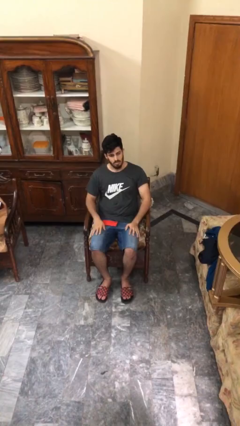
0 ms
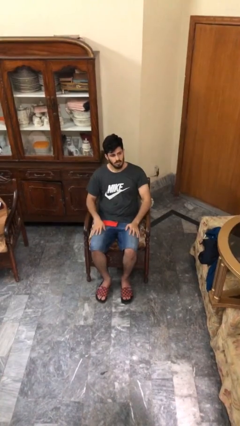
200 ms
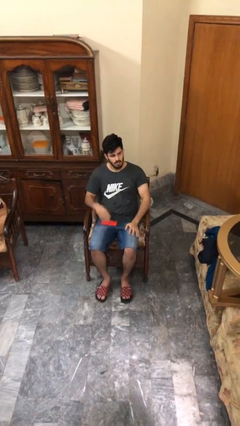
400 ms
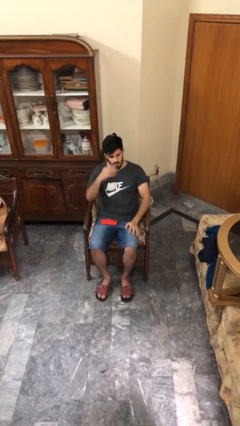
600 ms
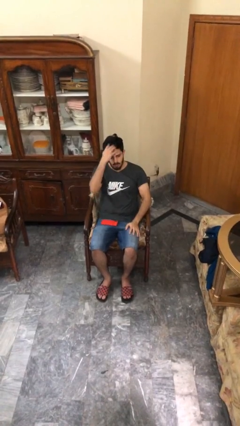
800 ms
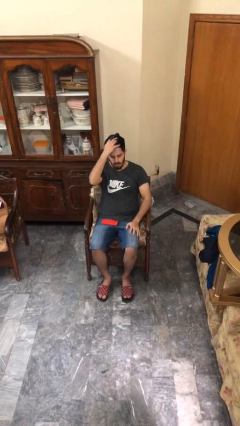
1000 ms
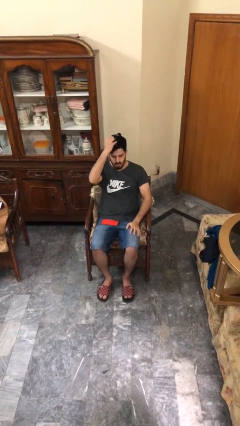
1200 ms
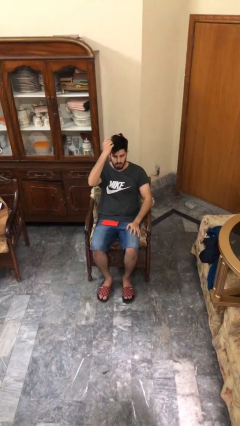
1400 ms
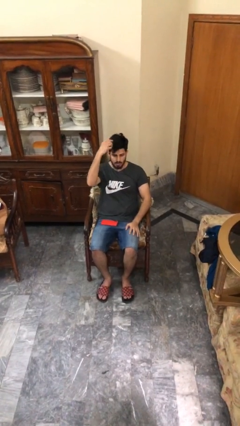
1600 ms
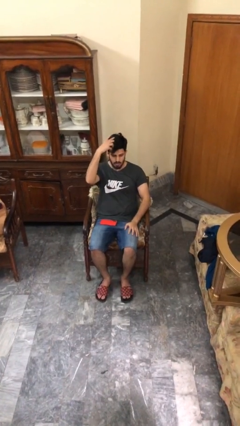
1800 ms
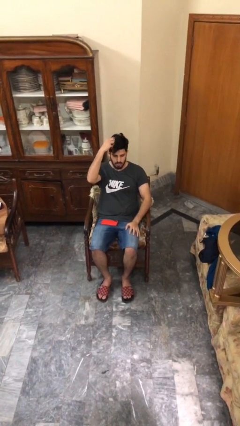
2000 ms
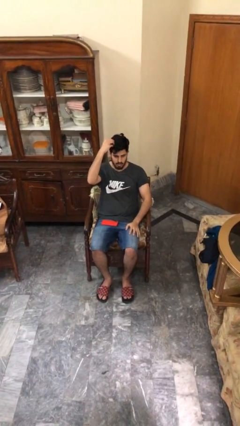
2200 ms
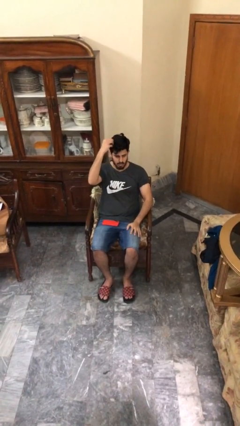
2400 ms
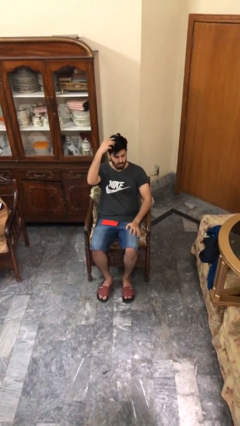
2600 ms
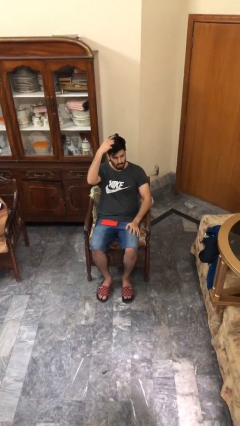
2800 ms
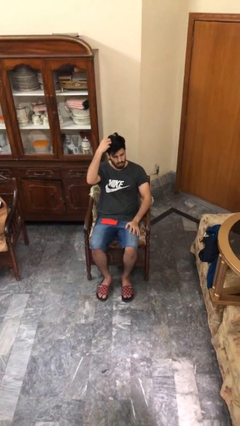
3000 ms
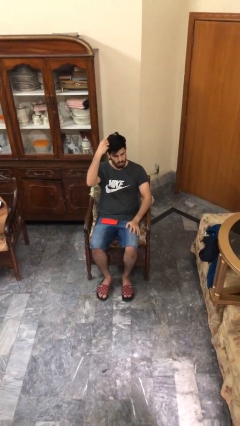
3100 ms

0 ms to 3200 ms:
person strokes hair

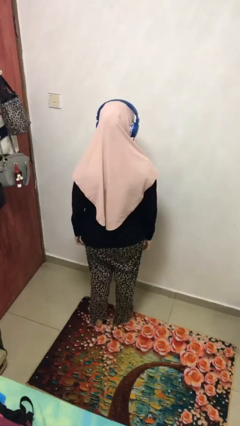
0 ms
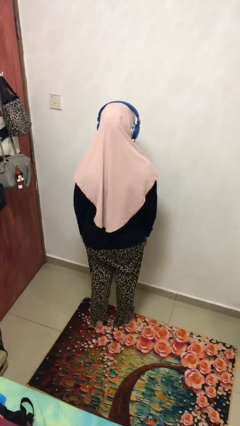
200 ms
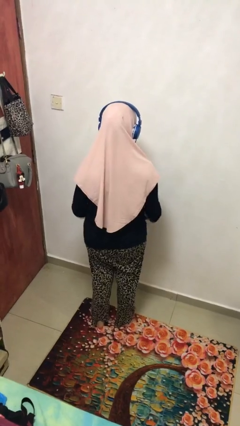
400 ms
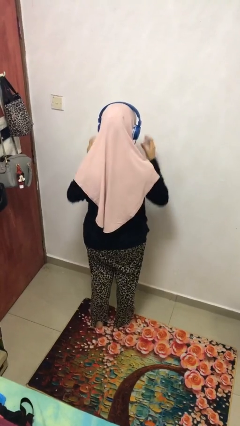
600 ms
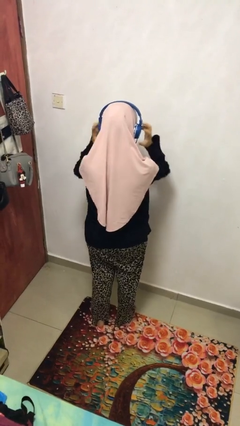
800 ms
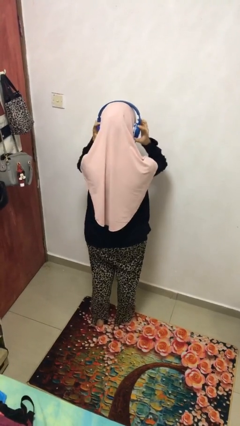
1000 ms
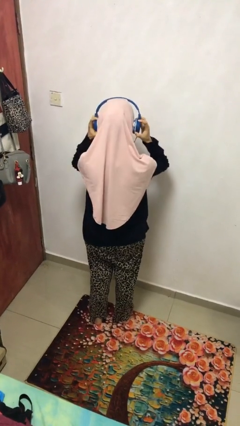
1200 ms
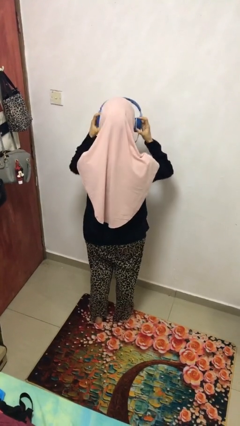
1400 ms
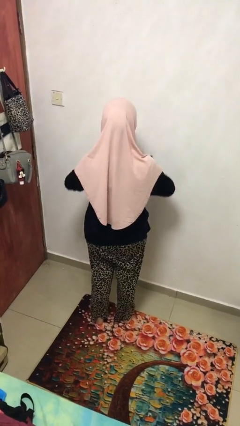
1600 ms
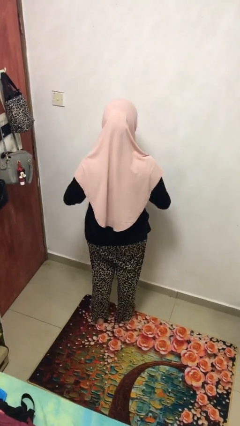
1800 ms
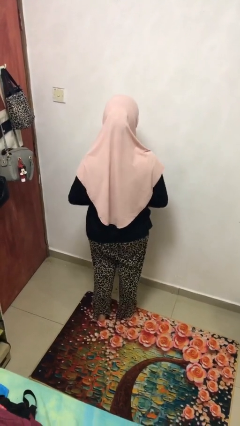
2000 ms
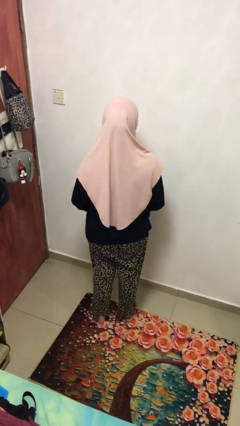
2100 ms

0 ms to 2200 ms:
person takes off headphones

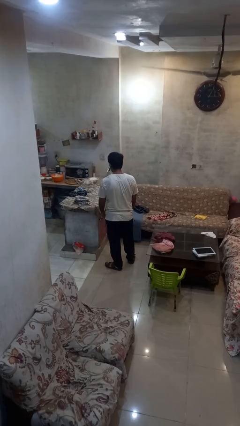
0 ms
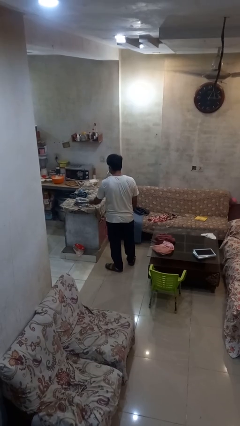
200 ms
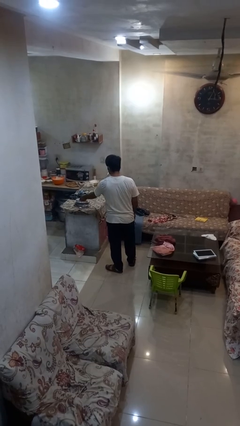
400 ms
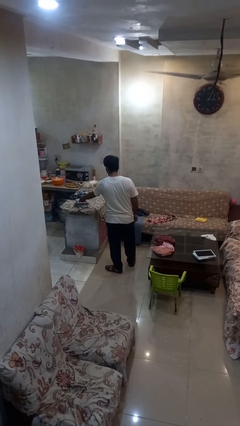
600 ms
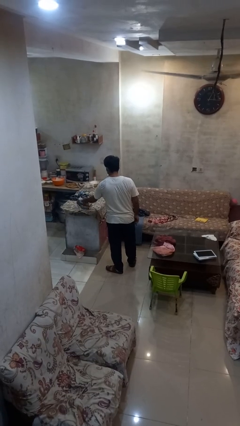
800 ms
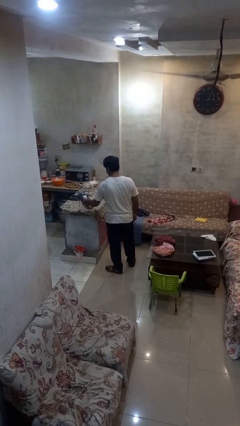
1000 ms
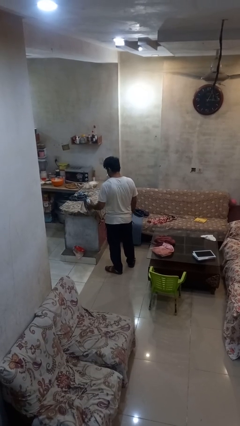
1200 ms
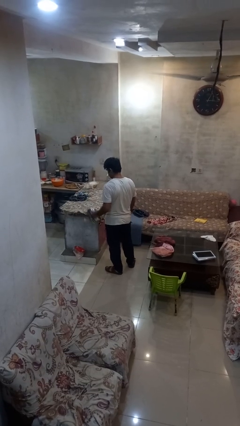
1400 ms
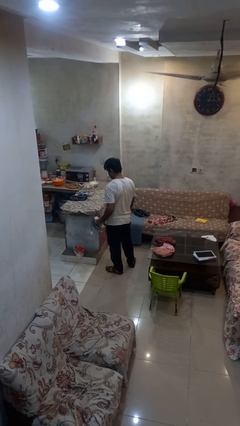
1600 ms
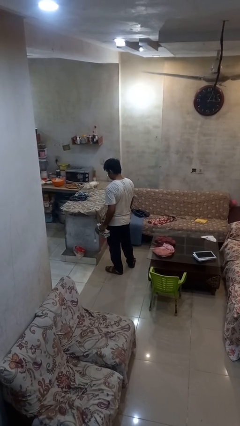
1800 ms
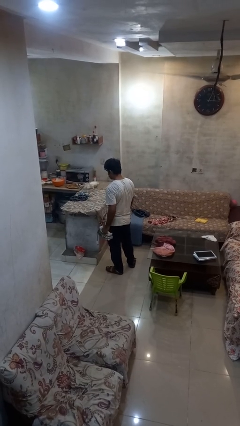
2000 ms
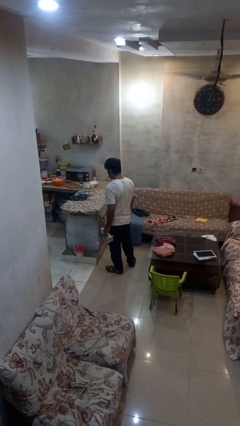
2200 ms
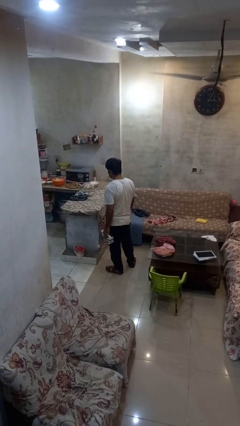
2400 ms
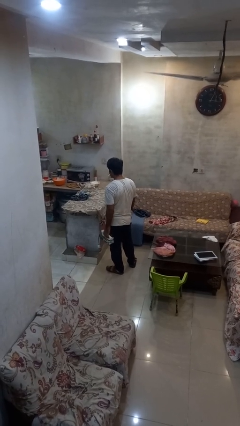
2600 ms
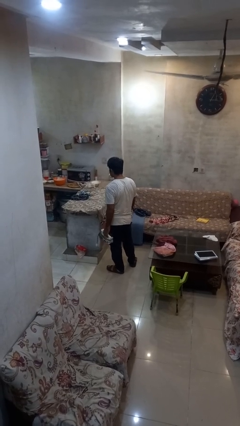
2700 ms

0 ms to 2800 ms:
person picks up object from countertop

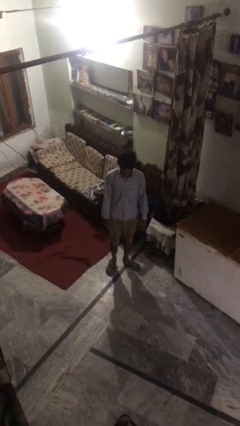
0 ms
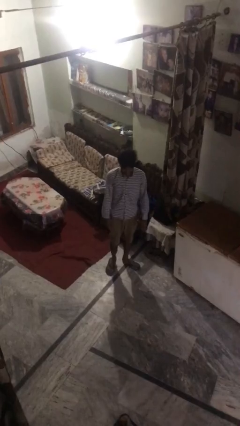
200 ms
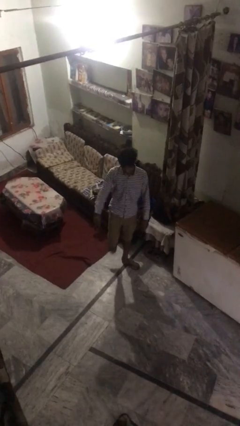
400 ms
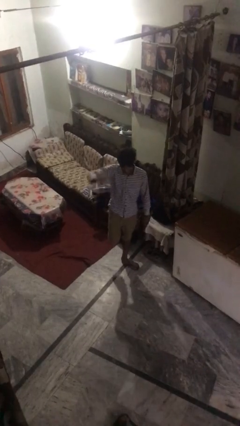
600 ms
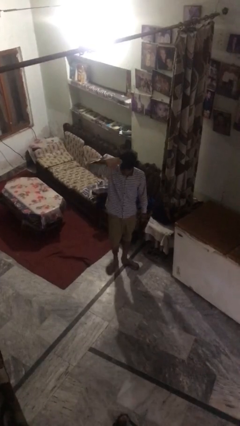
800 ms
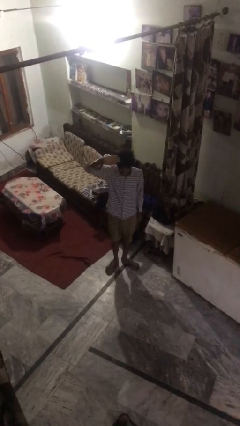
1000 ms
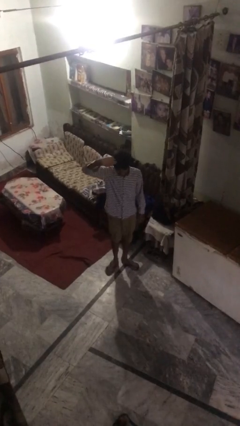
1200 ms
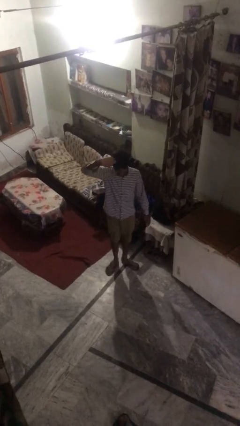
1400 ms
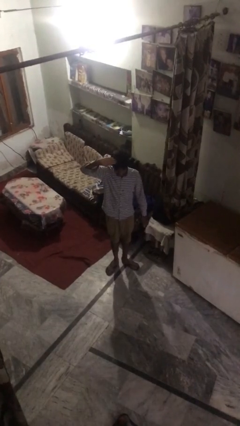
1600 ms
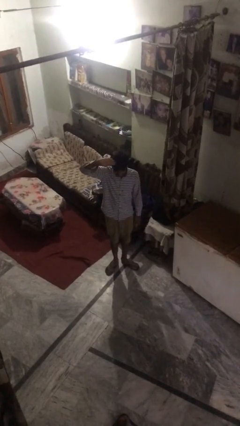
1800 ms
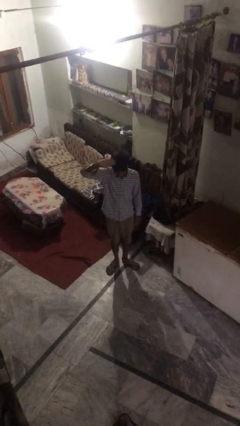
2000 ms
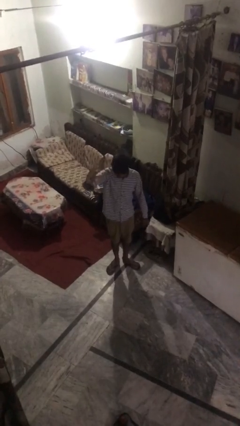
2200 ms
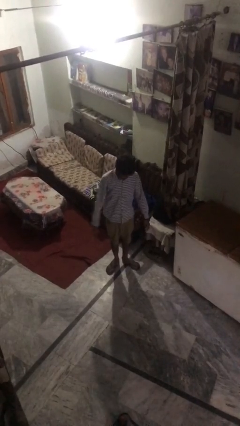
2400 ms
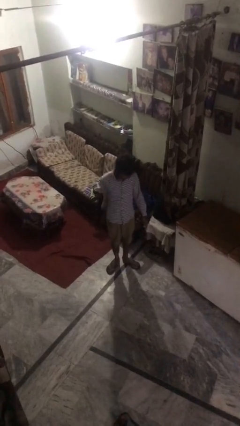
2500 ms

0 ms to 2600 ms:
person salutes

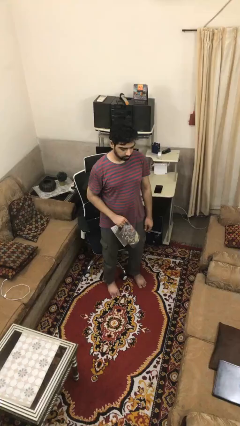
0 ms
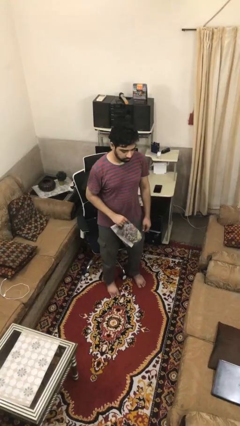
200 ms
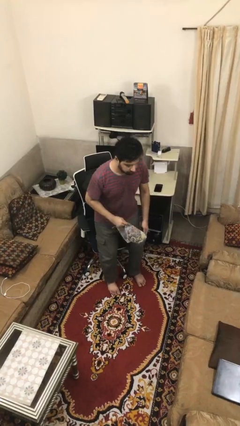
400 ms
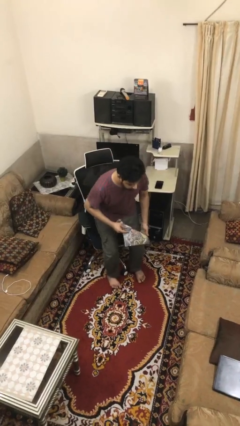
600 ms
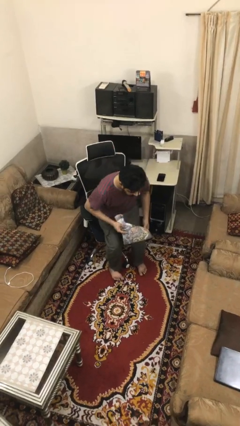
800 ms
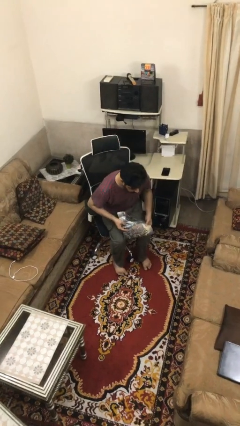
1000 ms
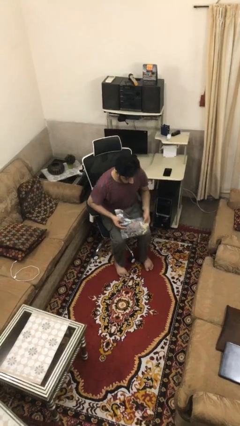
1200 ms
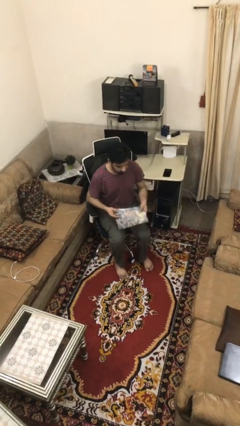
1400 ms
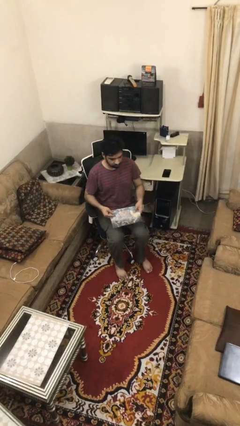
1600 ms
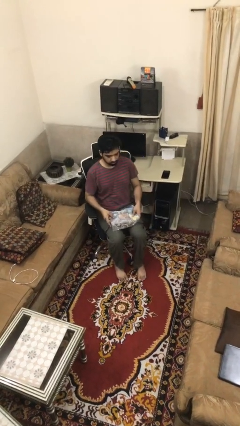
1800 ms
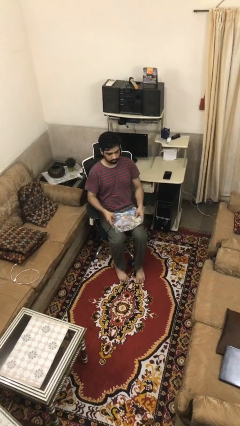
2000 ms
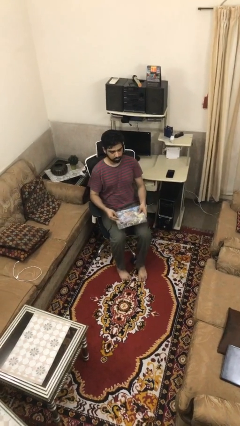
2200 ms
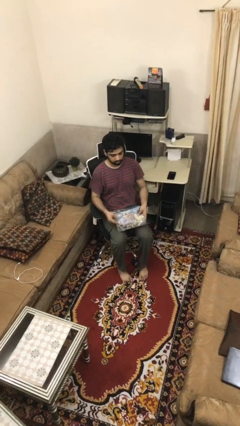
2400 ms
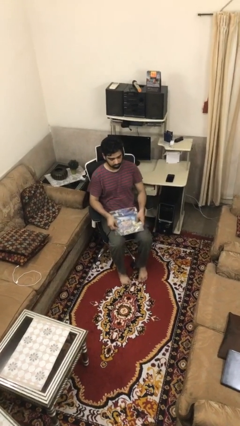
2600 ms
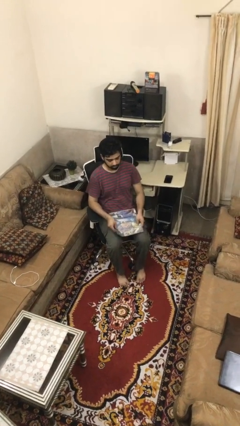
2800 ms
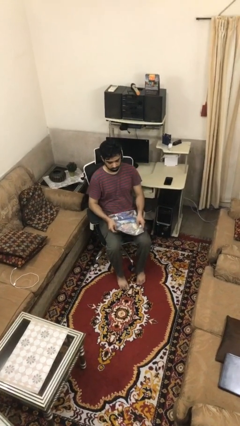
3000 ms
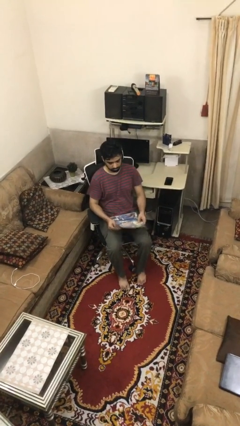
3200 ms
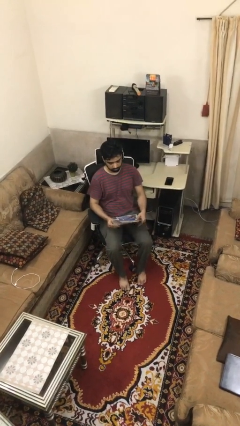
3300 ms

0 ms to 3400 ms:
person sits down

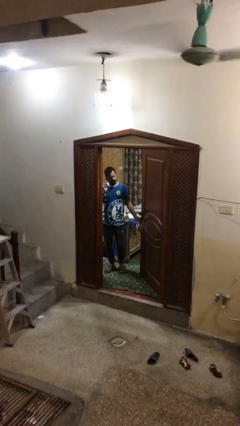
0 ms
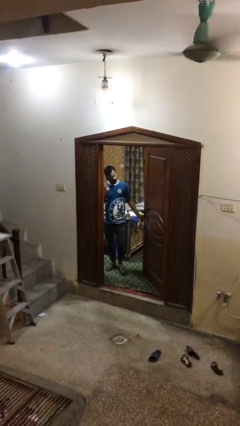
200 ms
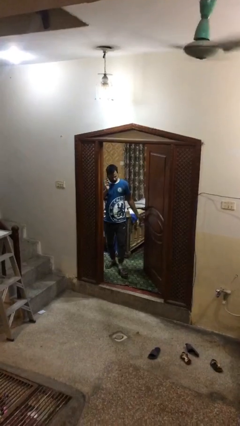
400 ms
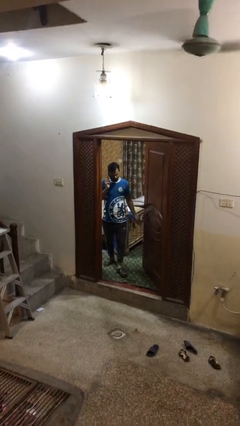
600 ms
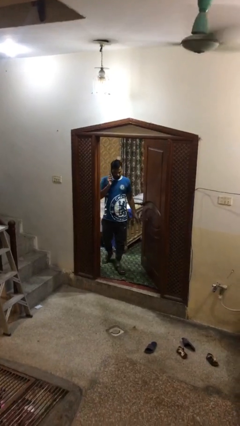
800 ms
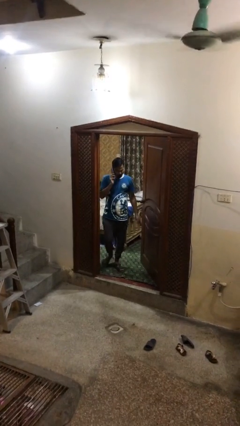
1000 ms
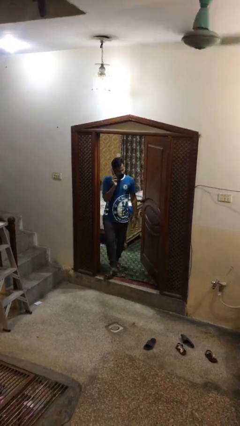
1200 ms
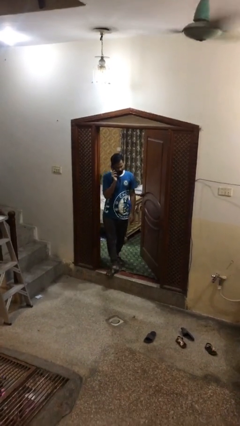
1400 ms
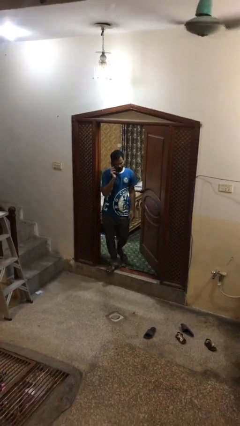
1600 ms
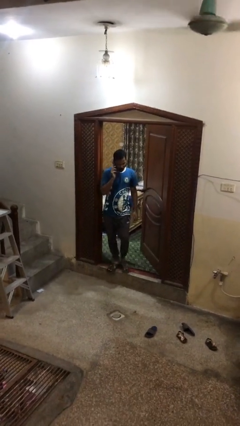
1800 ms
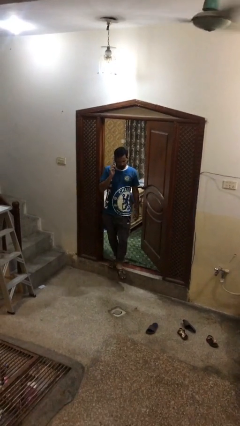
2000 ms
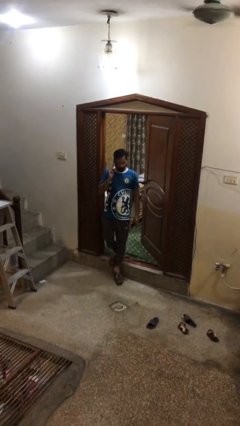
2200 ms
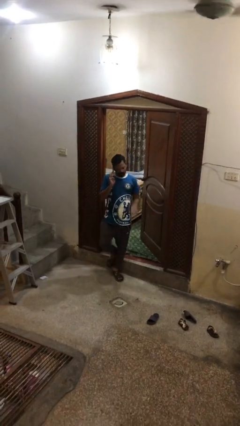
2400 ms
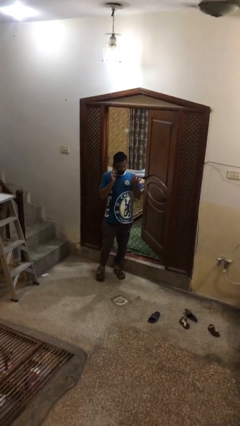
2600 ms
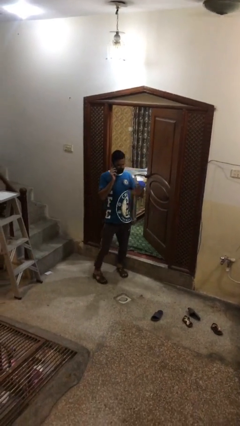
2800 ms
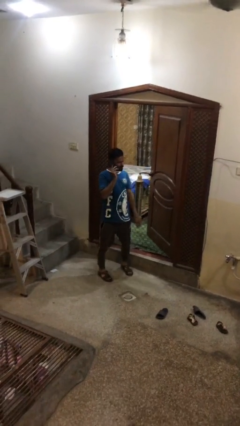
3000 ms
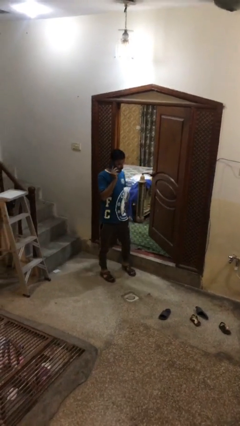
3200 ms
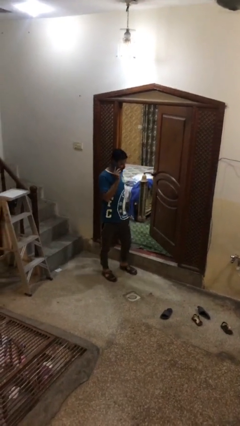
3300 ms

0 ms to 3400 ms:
person enters scene through structure
